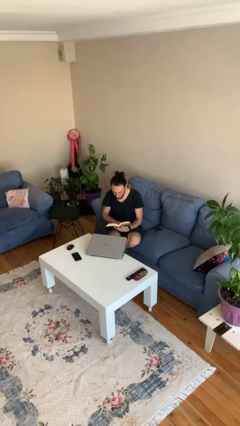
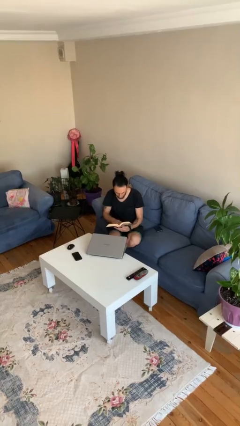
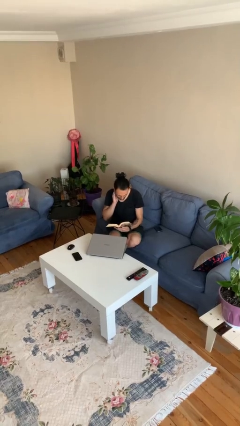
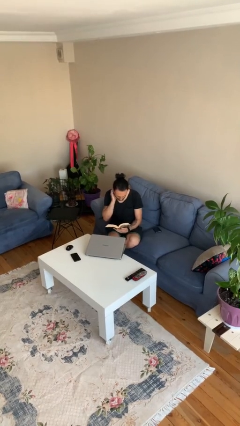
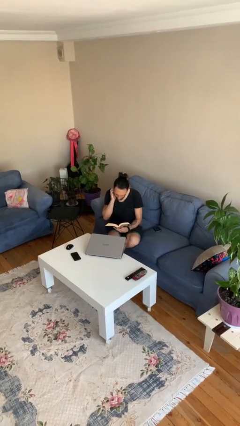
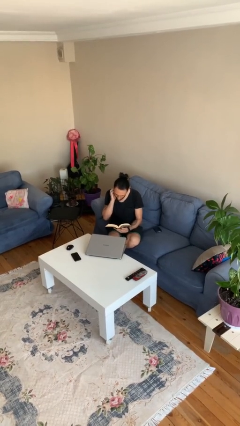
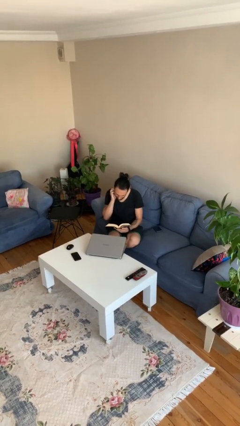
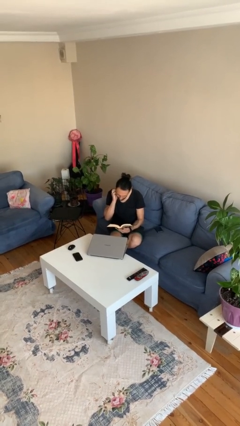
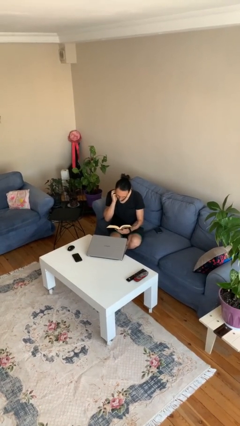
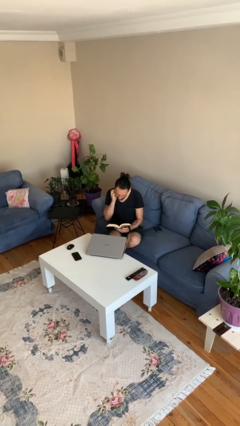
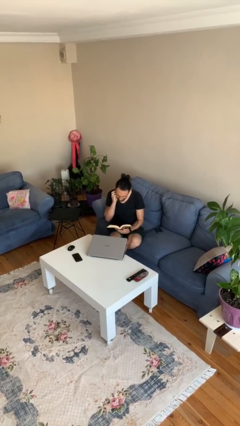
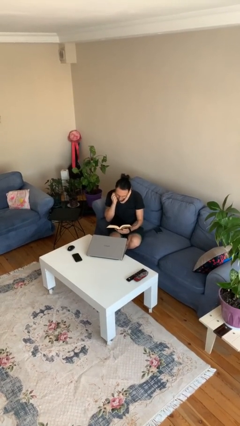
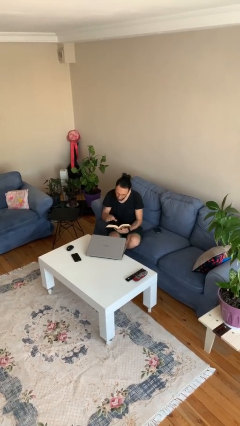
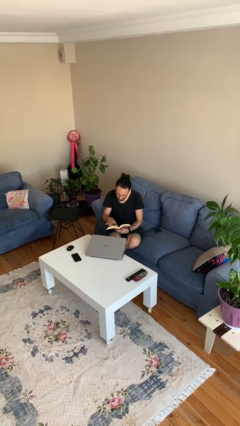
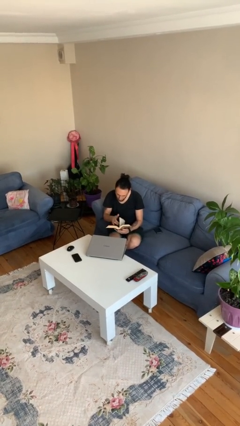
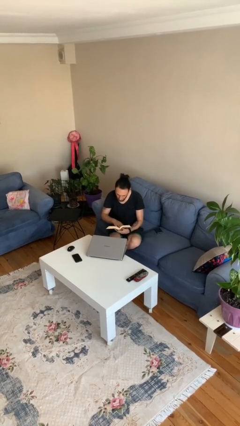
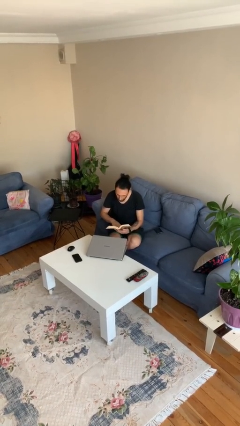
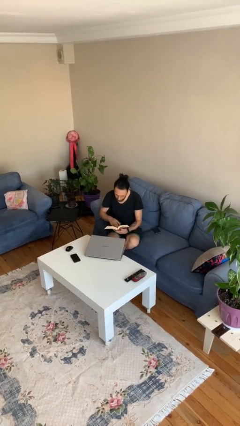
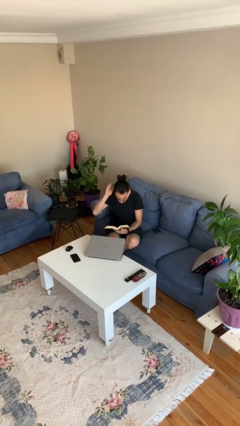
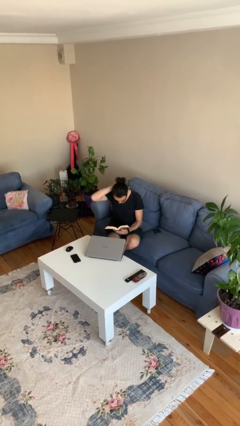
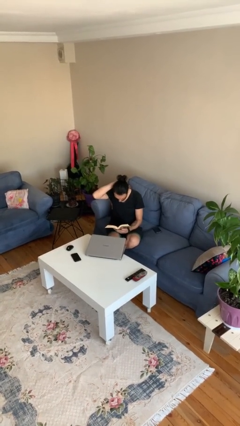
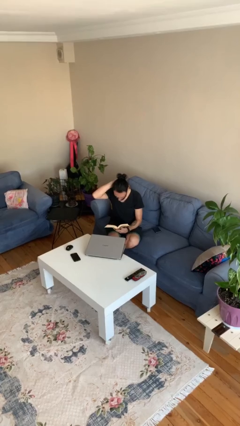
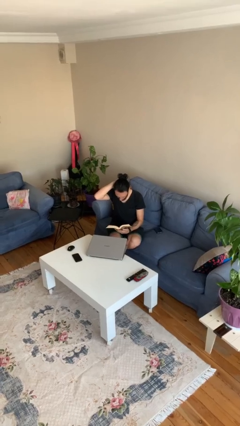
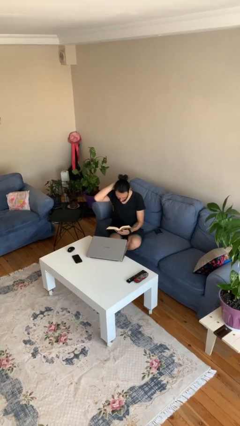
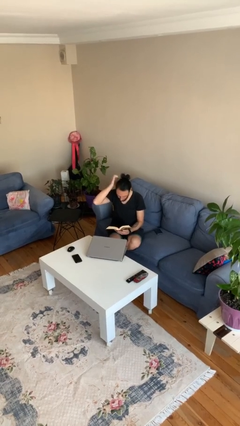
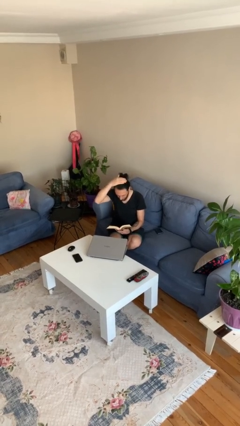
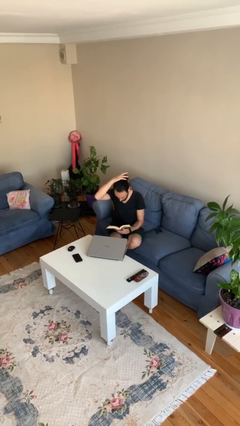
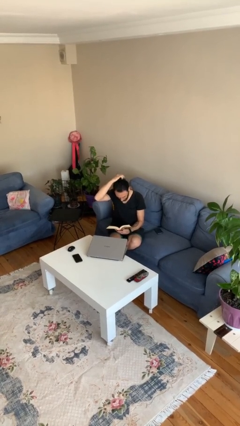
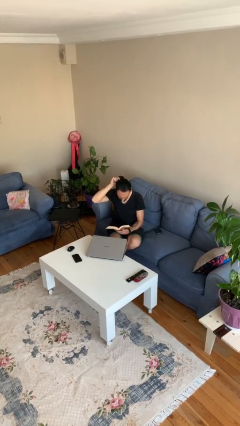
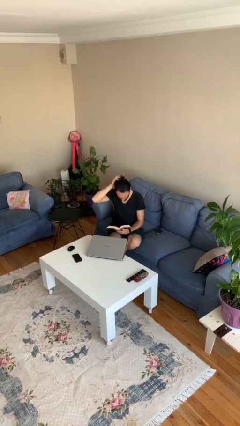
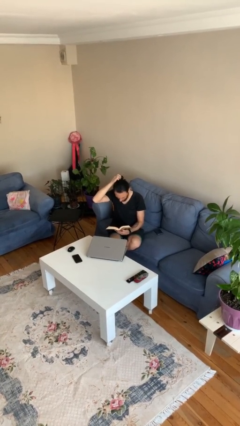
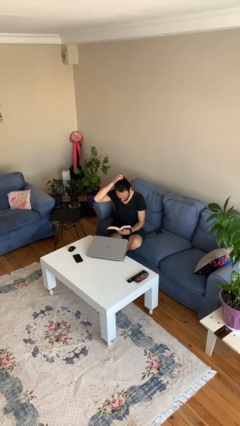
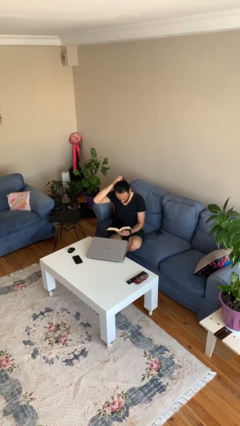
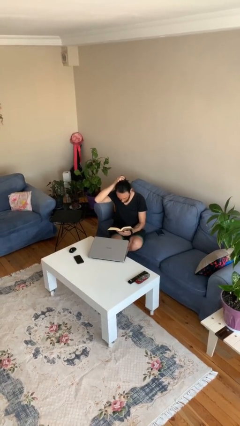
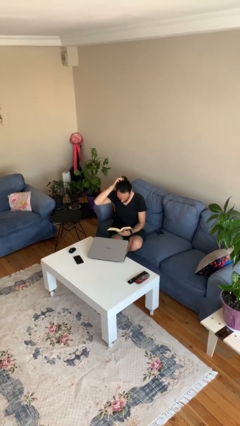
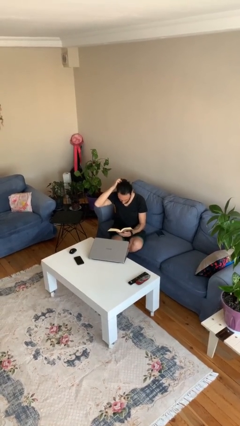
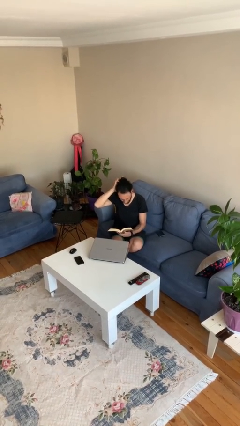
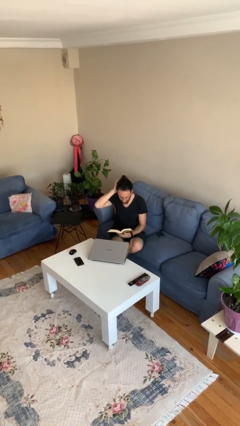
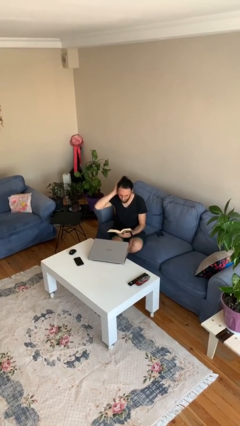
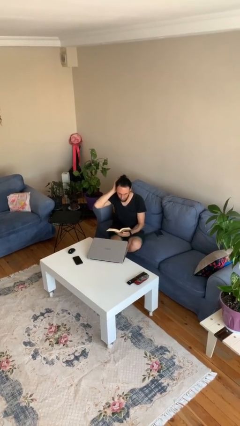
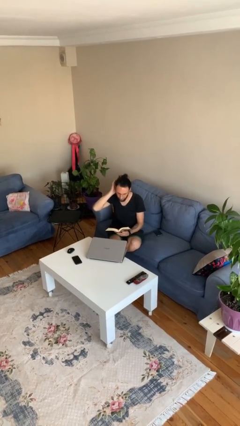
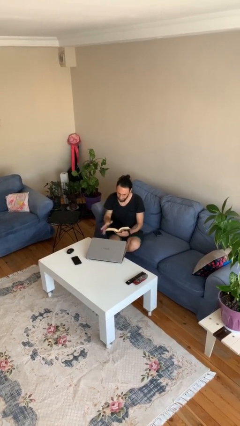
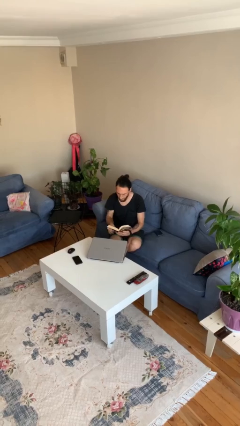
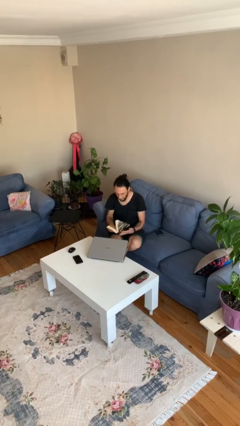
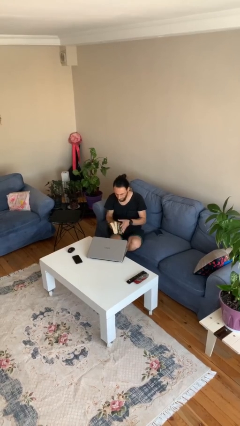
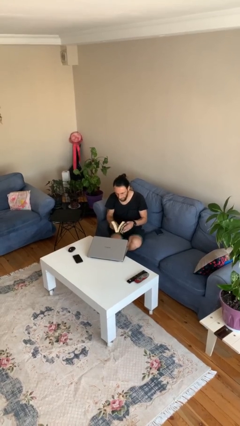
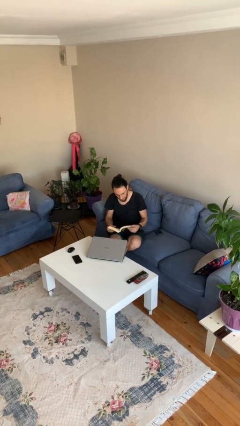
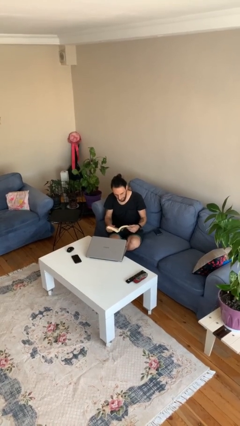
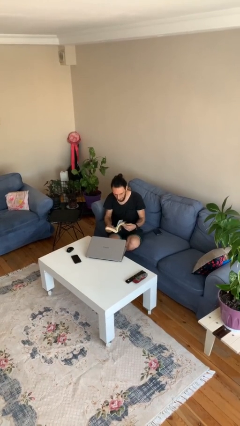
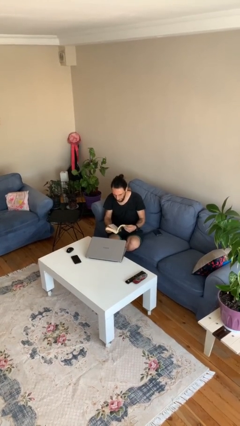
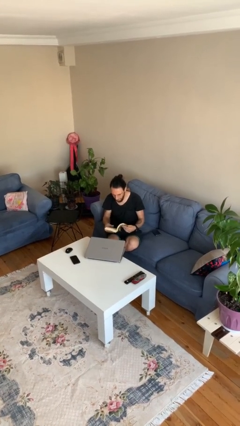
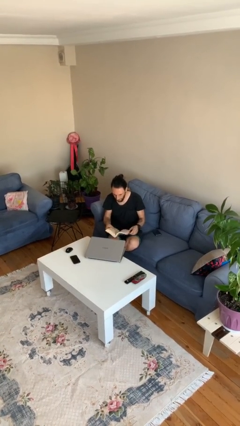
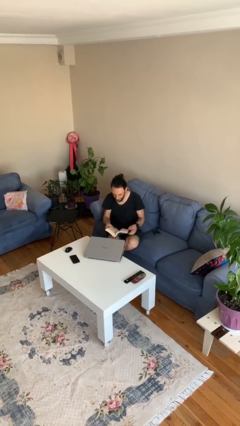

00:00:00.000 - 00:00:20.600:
person reads document

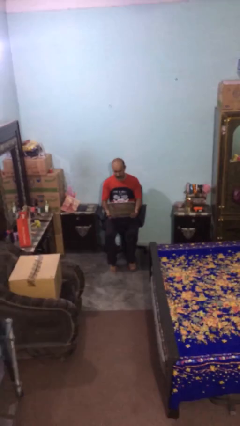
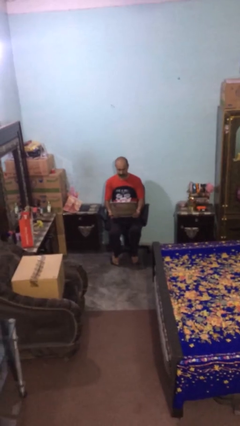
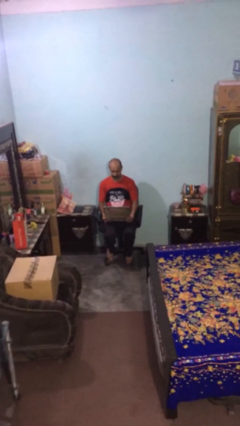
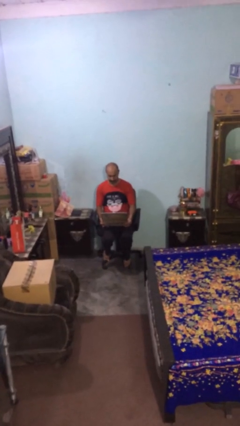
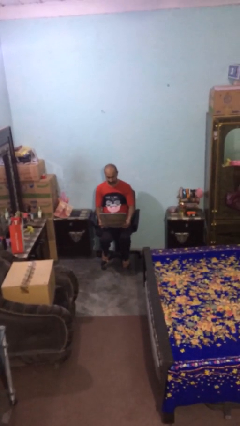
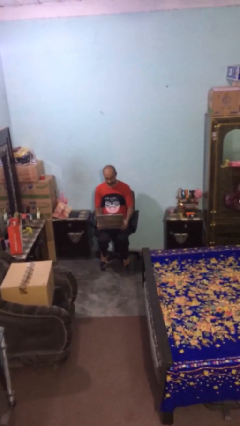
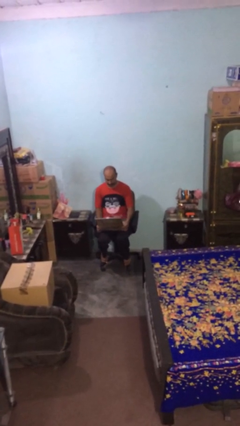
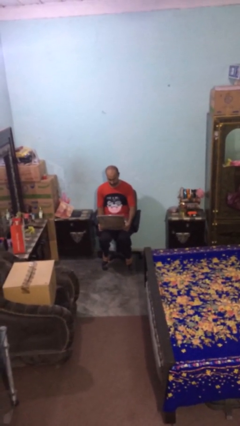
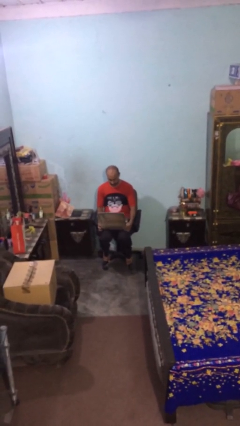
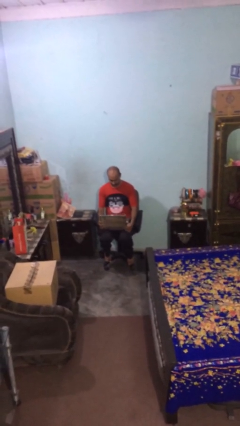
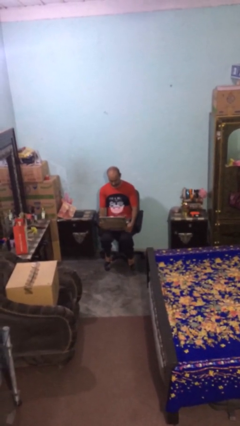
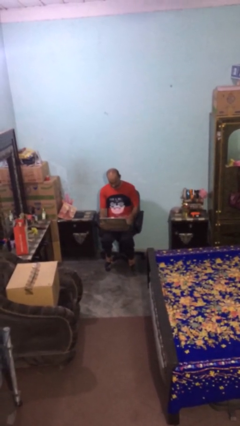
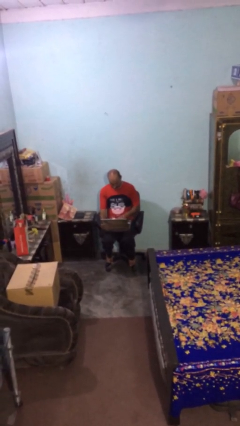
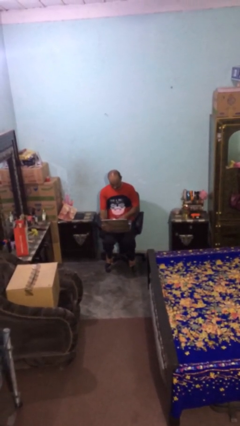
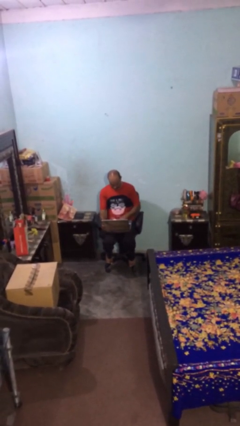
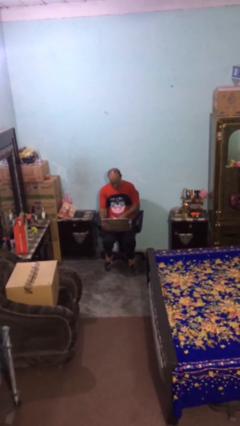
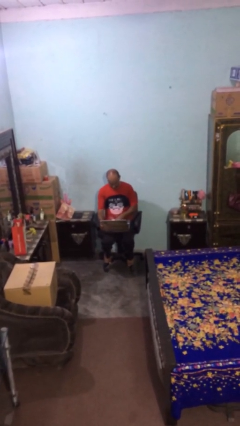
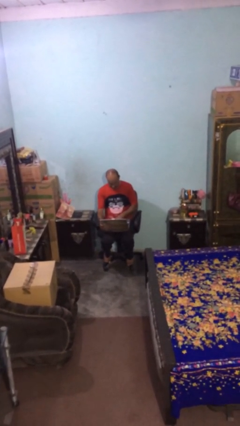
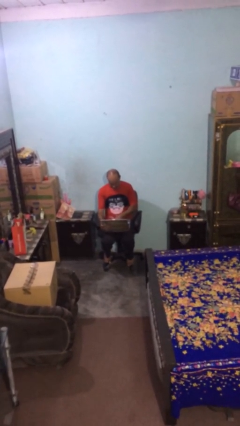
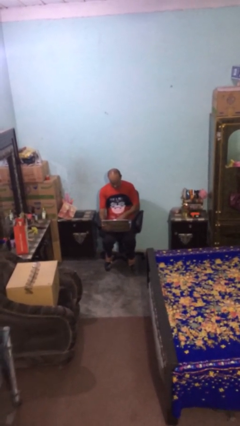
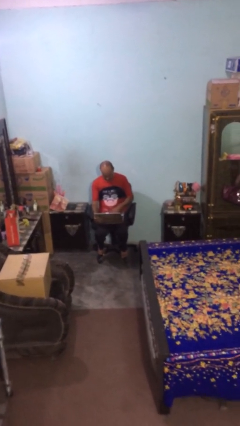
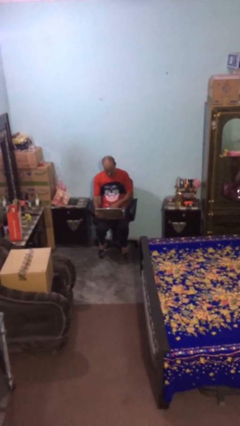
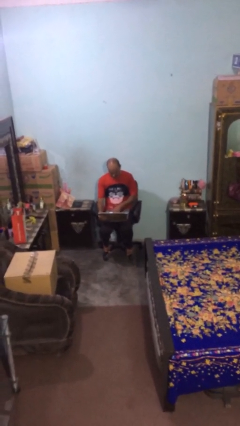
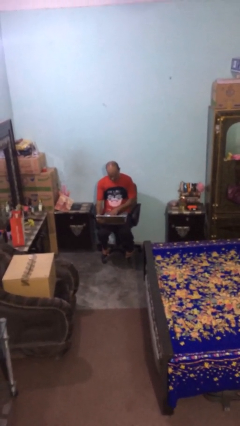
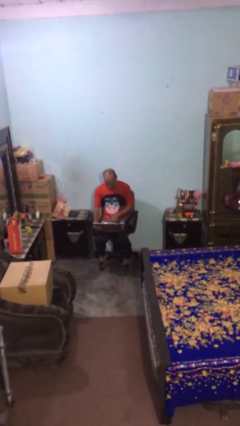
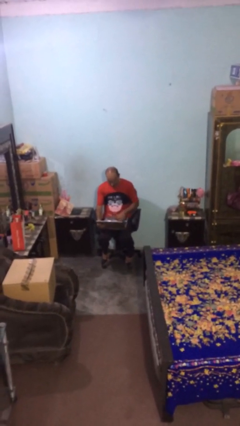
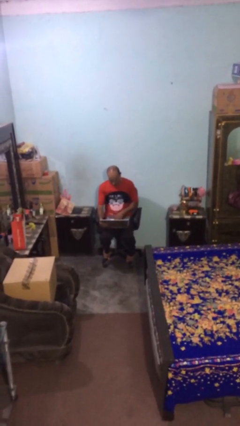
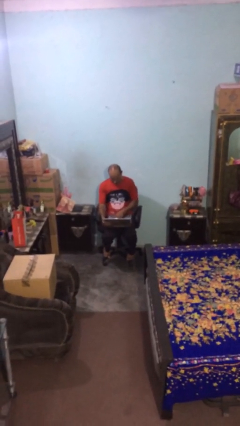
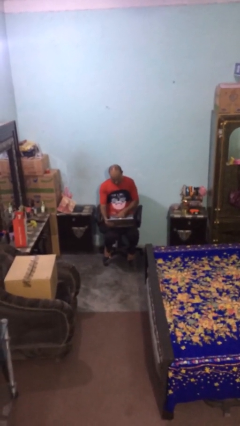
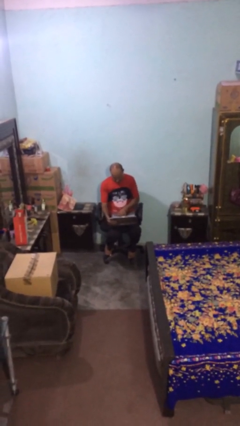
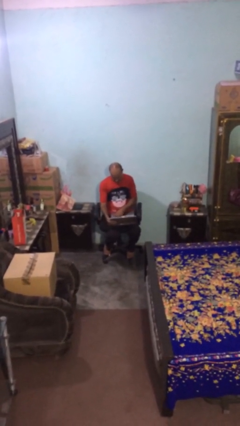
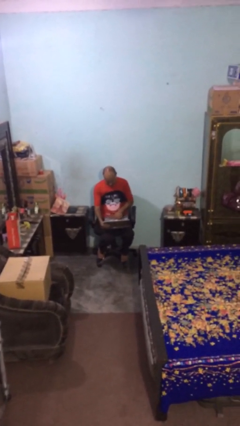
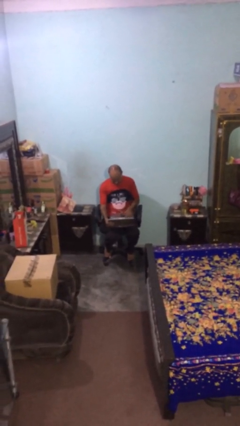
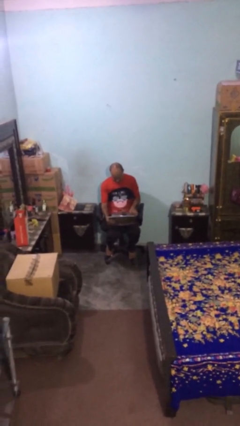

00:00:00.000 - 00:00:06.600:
person interacts with laptop

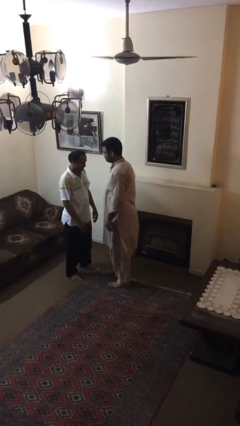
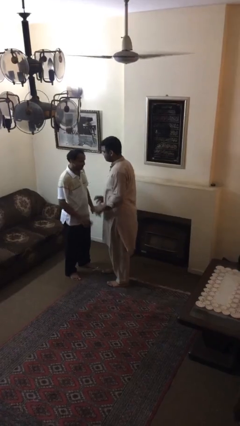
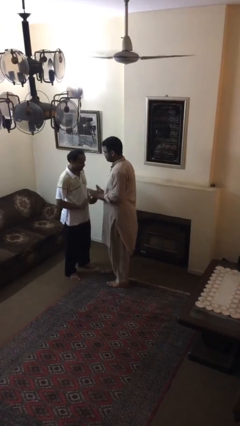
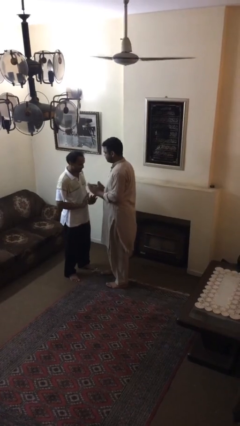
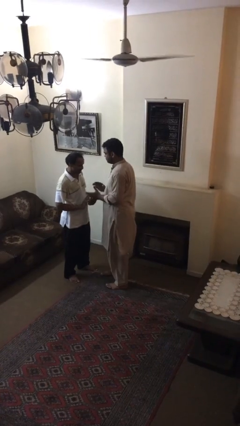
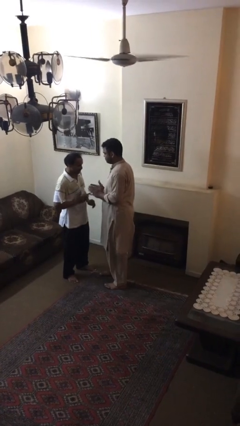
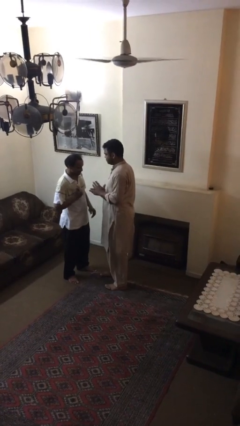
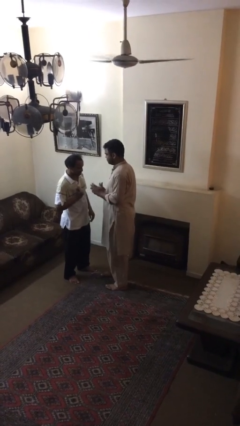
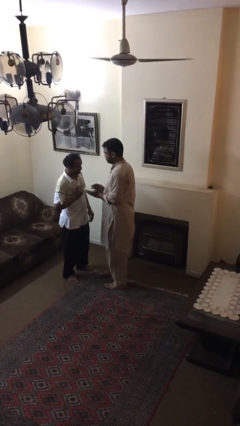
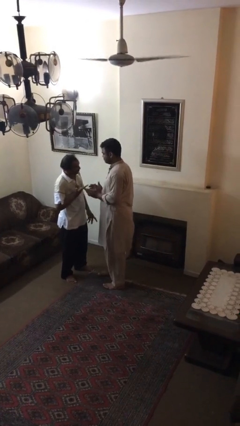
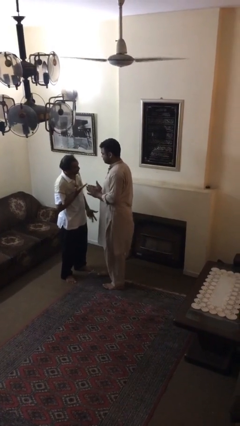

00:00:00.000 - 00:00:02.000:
person talks to person
